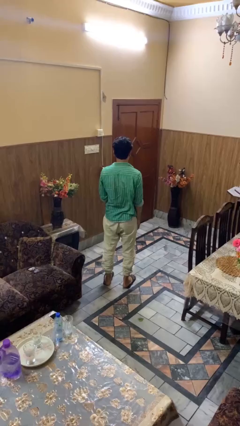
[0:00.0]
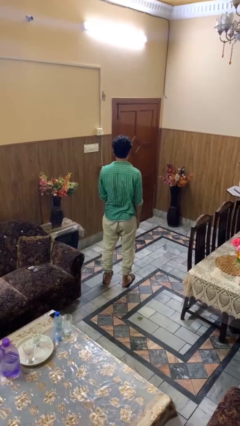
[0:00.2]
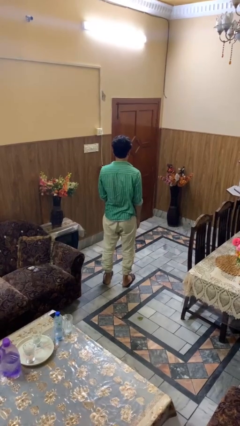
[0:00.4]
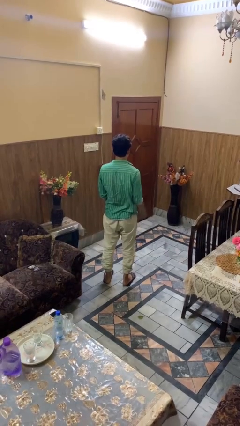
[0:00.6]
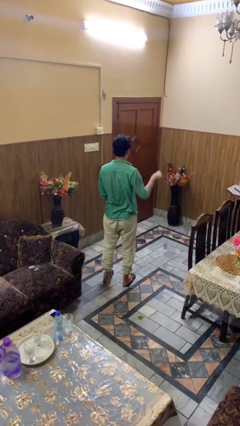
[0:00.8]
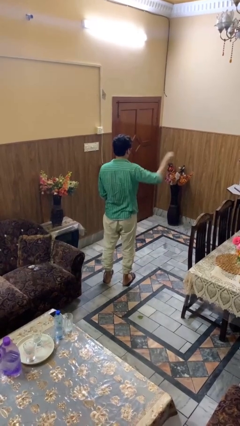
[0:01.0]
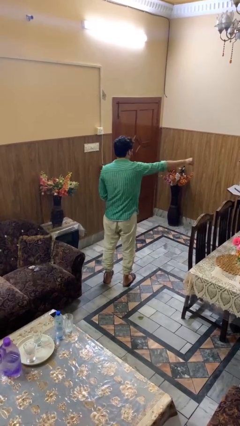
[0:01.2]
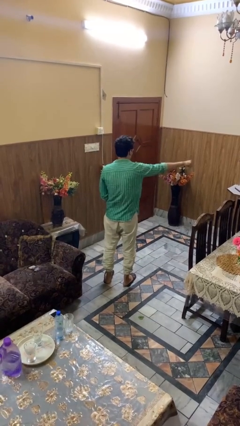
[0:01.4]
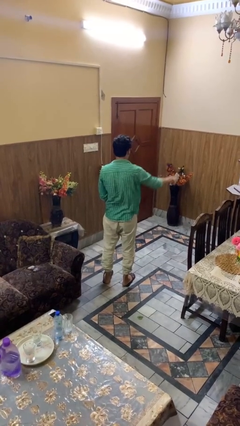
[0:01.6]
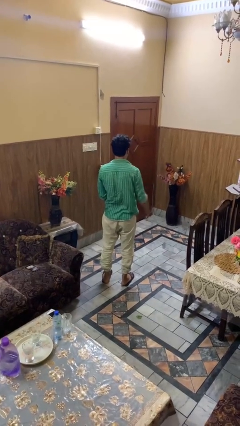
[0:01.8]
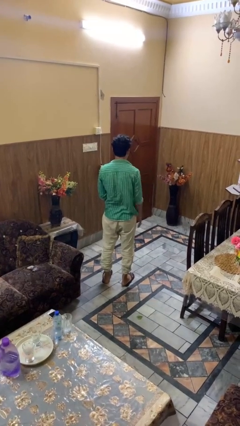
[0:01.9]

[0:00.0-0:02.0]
person punches

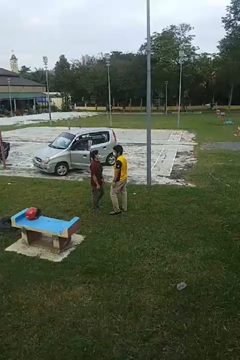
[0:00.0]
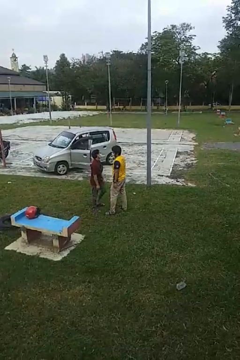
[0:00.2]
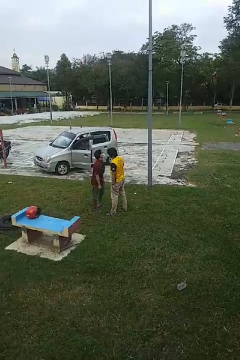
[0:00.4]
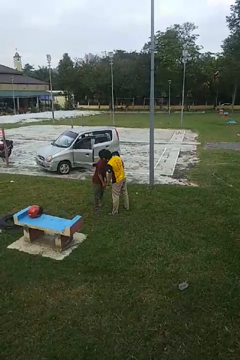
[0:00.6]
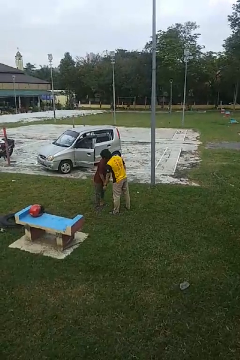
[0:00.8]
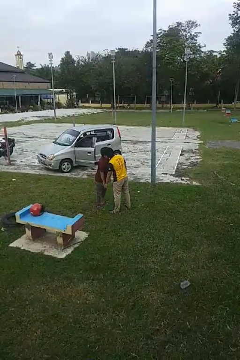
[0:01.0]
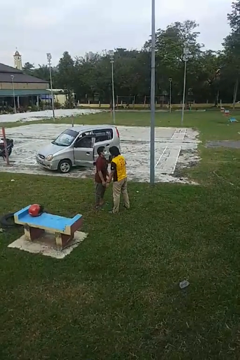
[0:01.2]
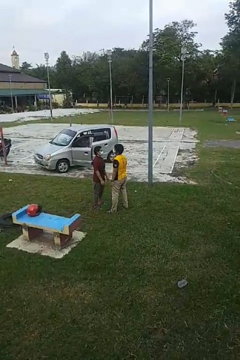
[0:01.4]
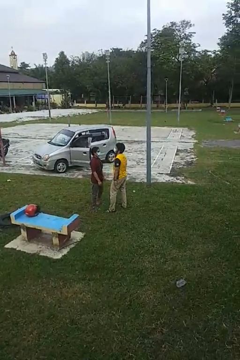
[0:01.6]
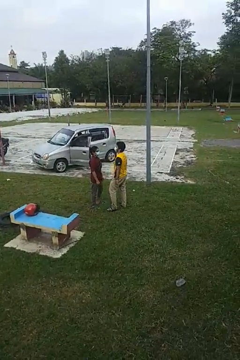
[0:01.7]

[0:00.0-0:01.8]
person kisses cheek of person

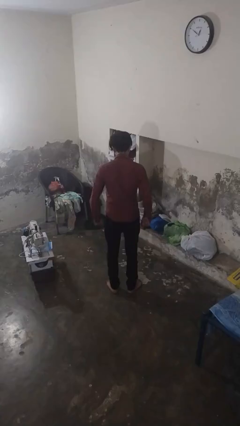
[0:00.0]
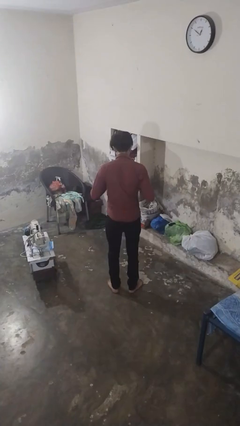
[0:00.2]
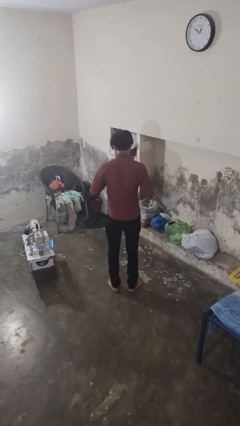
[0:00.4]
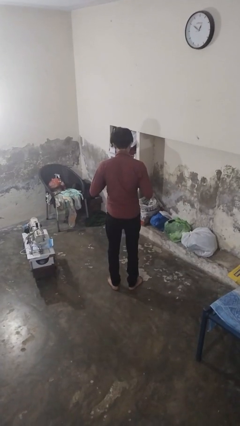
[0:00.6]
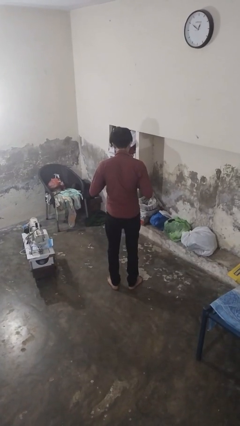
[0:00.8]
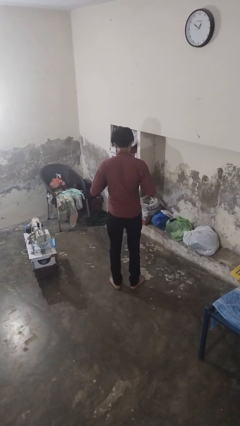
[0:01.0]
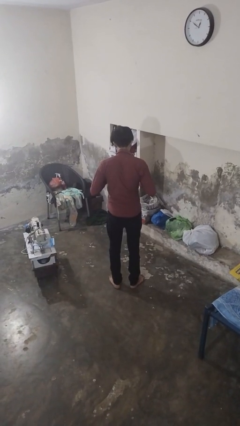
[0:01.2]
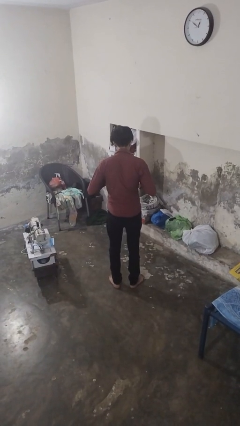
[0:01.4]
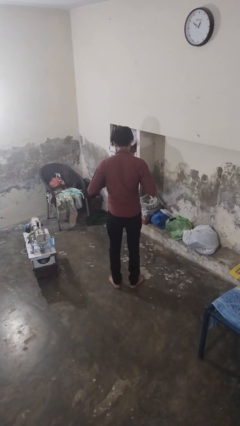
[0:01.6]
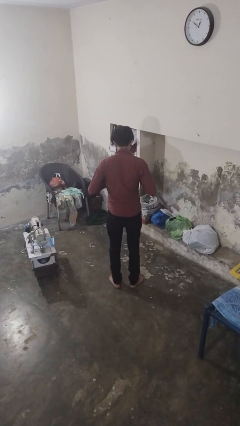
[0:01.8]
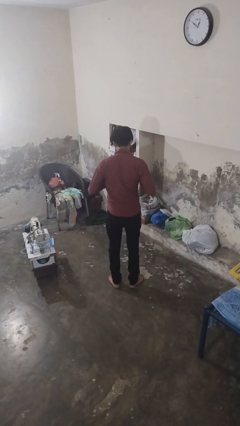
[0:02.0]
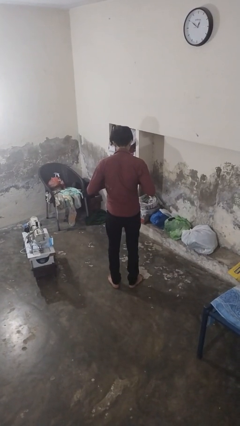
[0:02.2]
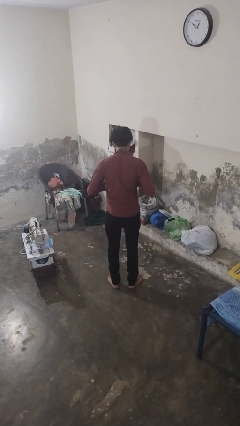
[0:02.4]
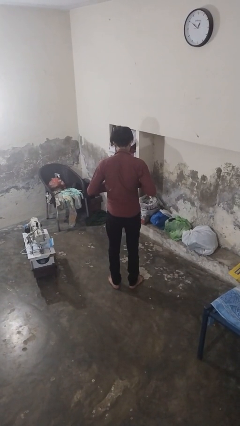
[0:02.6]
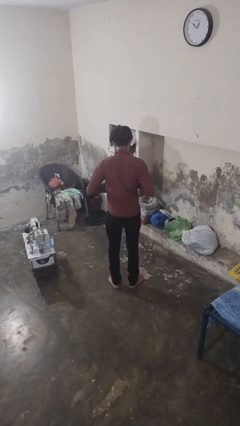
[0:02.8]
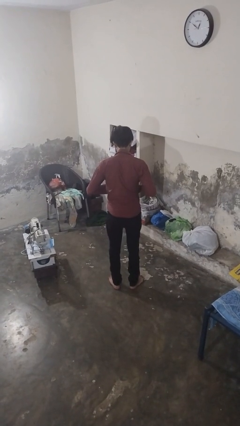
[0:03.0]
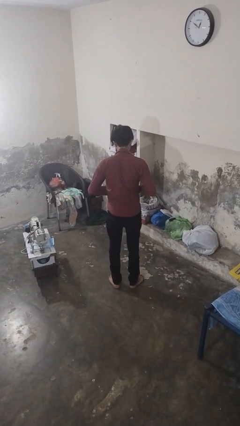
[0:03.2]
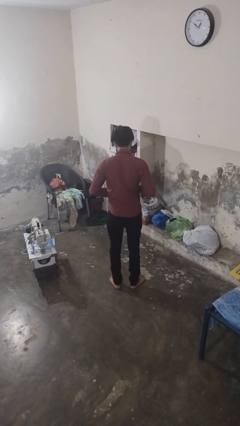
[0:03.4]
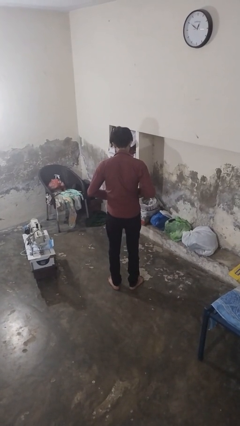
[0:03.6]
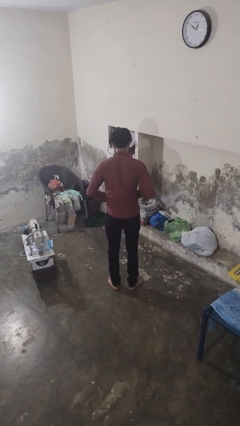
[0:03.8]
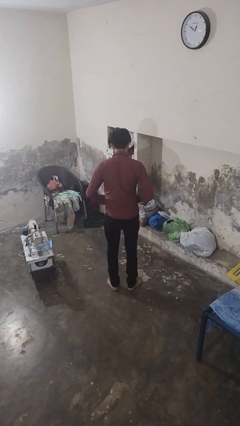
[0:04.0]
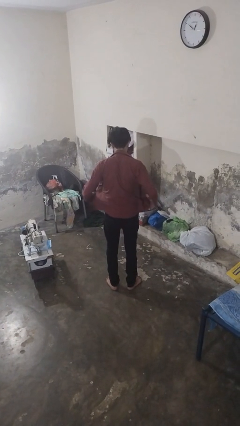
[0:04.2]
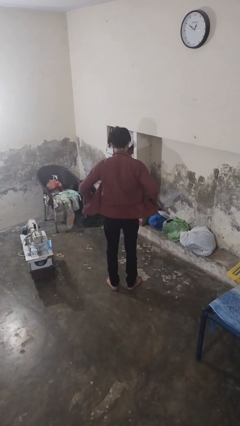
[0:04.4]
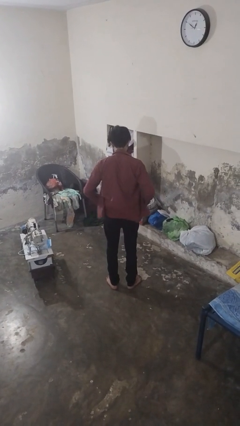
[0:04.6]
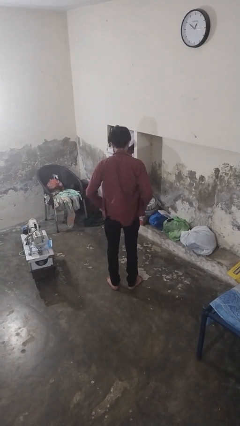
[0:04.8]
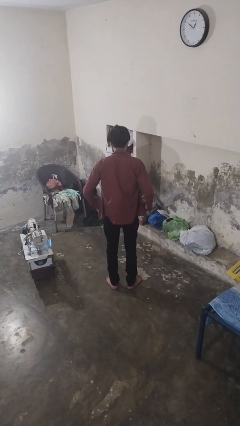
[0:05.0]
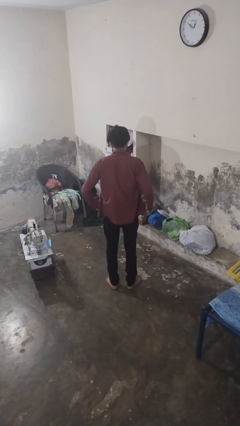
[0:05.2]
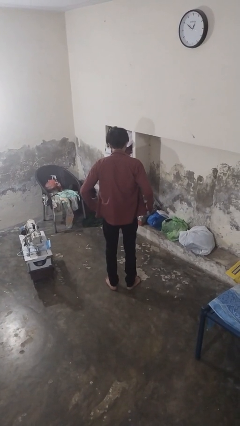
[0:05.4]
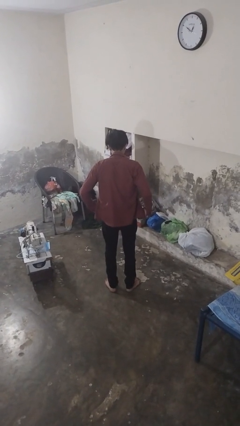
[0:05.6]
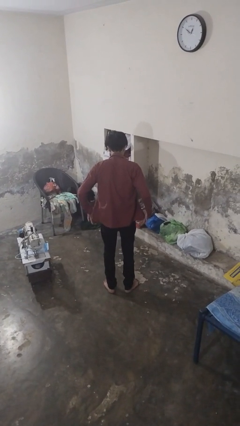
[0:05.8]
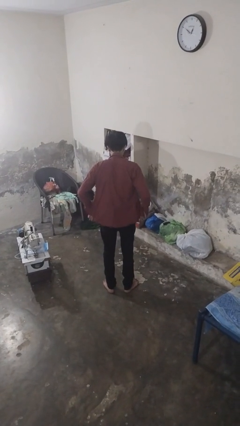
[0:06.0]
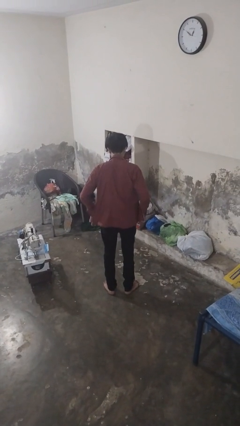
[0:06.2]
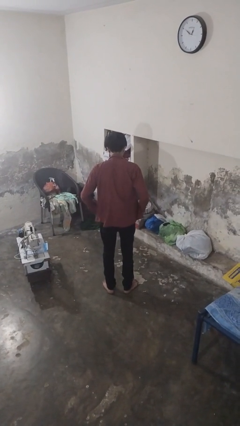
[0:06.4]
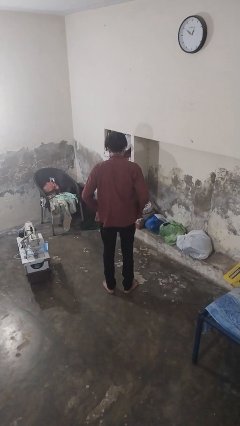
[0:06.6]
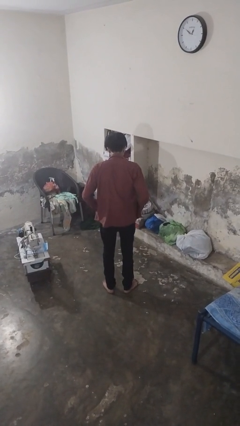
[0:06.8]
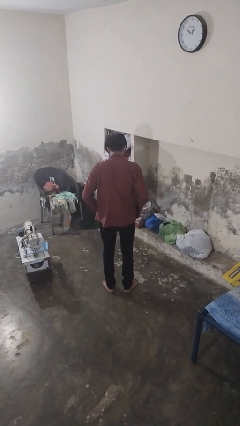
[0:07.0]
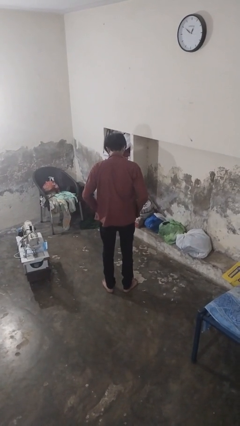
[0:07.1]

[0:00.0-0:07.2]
person unbuttons shirt

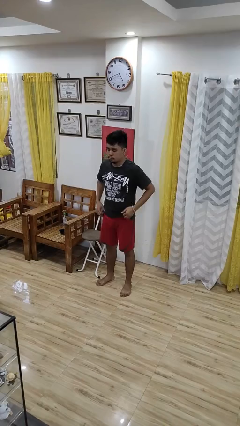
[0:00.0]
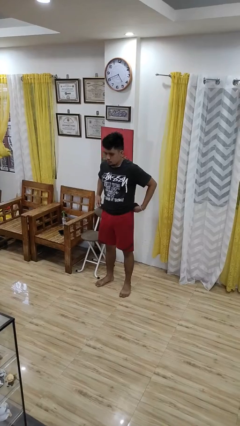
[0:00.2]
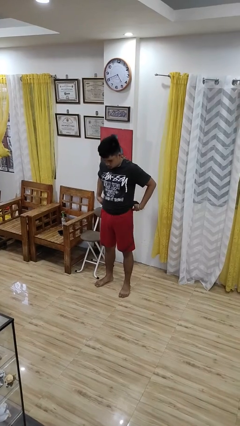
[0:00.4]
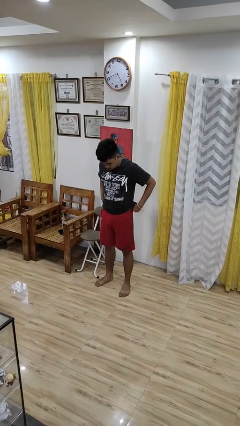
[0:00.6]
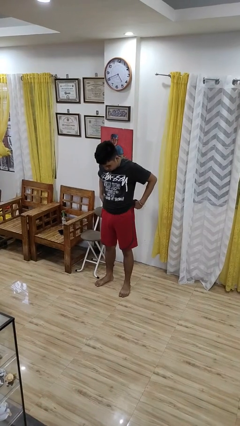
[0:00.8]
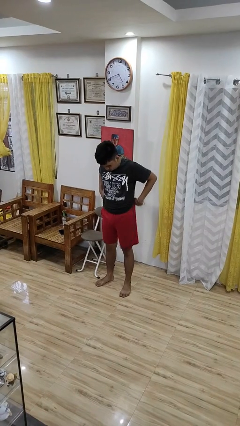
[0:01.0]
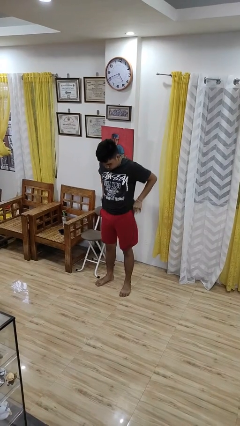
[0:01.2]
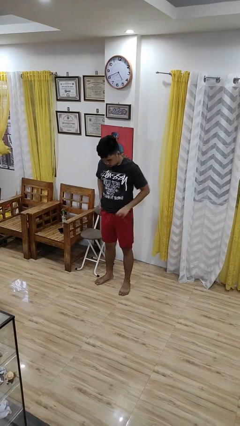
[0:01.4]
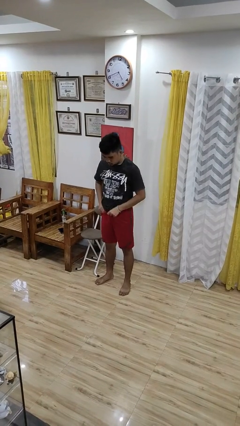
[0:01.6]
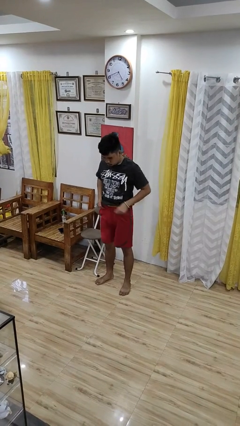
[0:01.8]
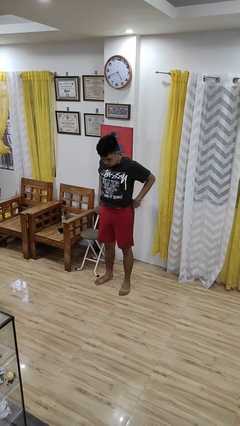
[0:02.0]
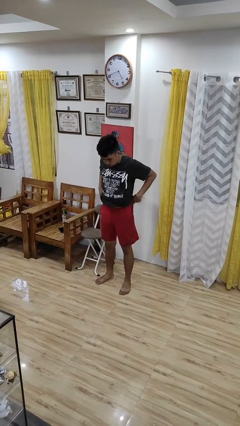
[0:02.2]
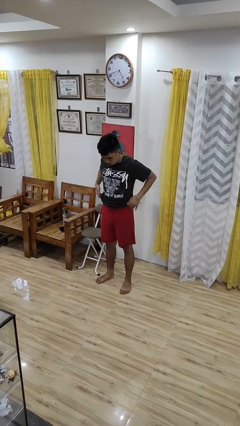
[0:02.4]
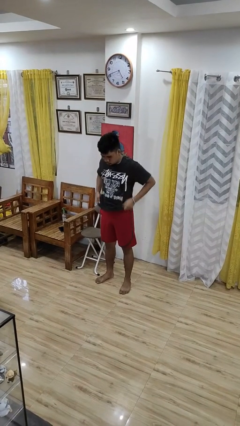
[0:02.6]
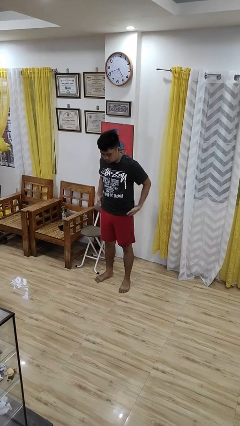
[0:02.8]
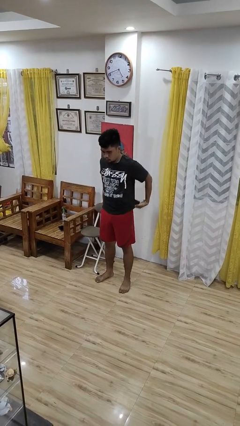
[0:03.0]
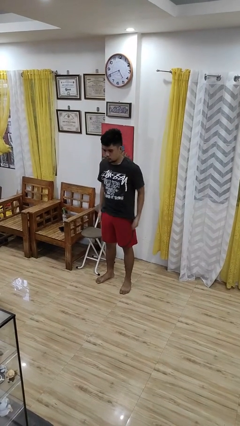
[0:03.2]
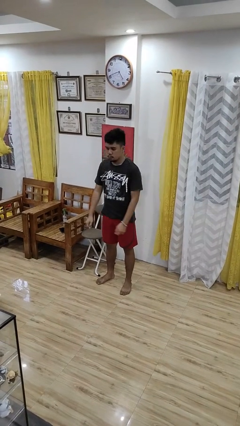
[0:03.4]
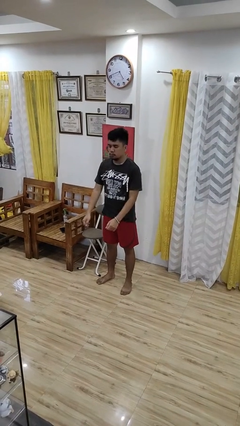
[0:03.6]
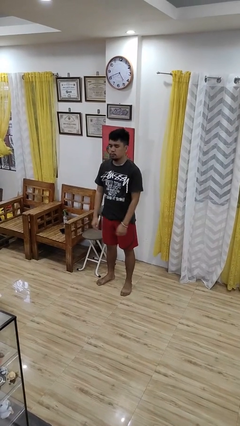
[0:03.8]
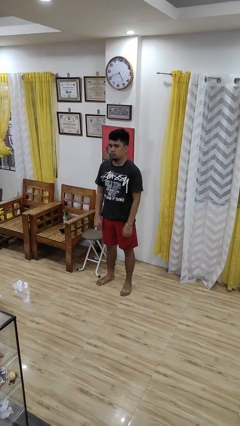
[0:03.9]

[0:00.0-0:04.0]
person hikes up pants

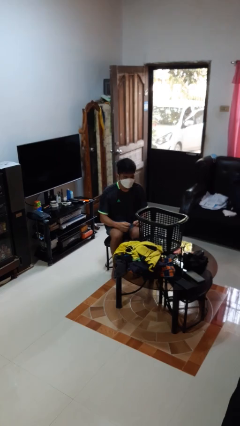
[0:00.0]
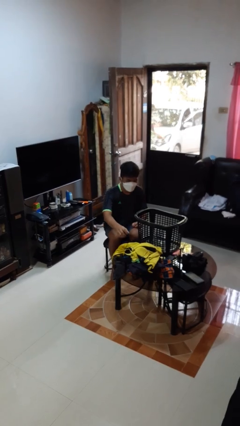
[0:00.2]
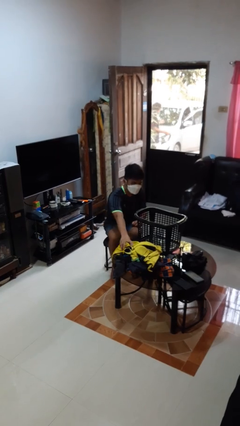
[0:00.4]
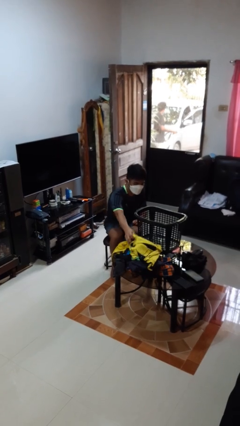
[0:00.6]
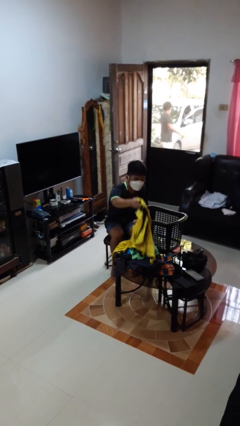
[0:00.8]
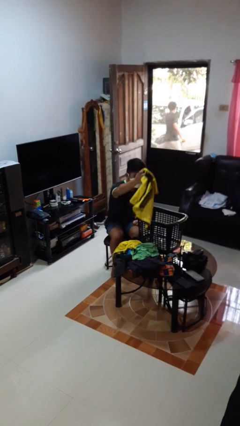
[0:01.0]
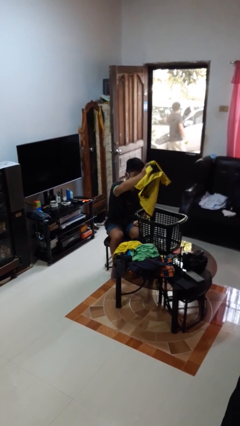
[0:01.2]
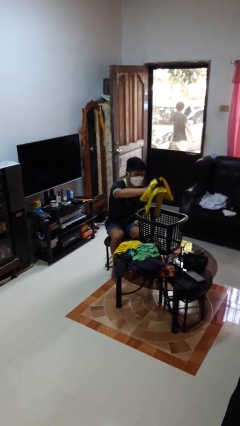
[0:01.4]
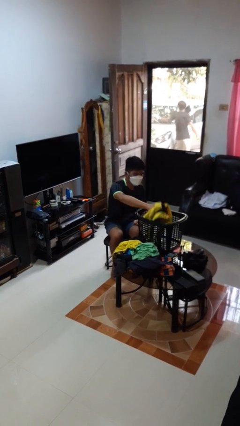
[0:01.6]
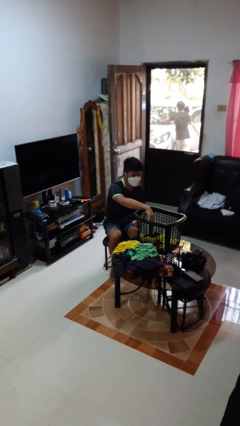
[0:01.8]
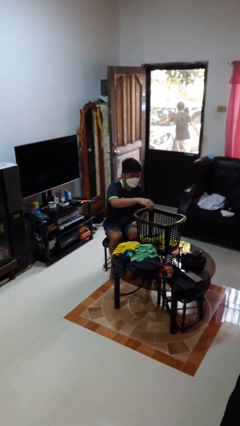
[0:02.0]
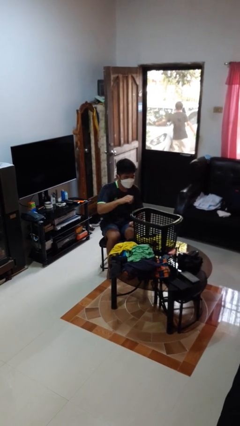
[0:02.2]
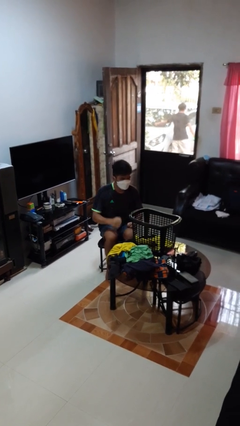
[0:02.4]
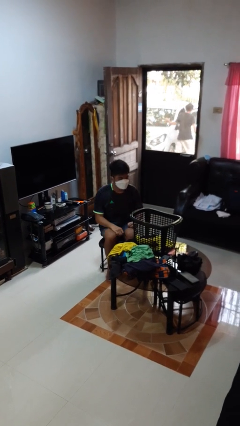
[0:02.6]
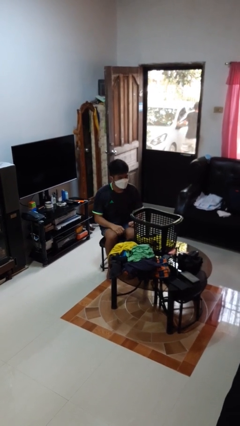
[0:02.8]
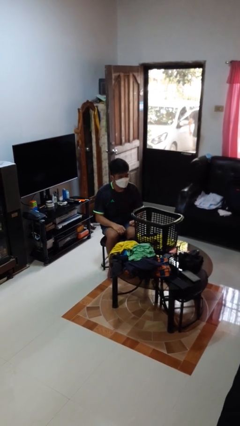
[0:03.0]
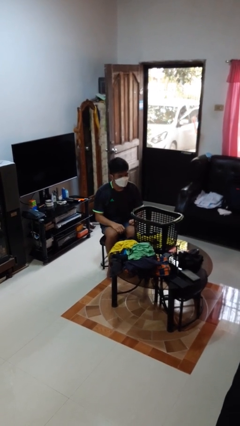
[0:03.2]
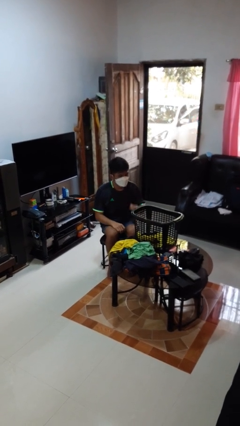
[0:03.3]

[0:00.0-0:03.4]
person puts object into basket
